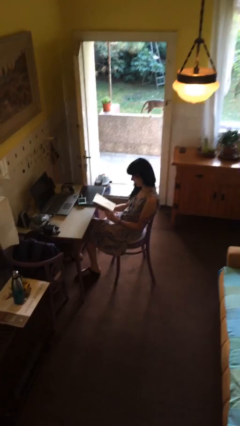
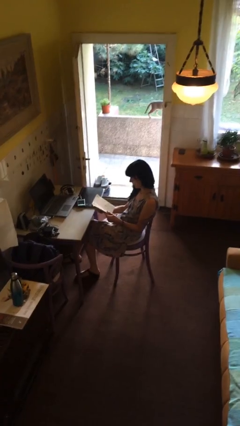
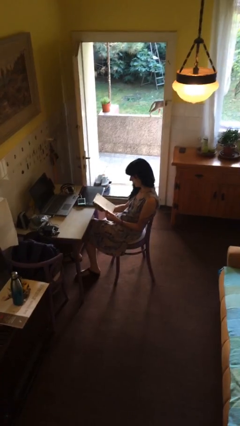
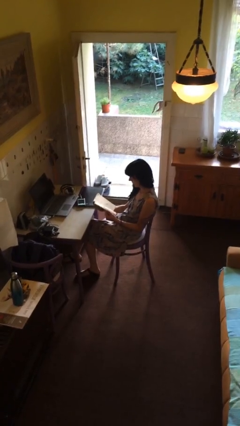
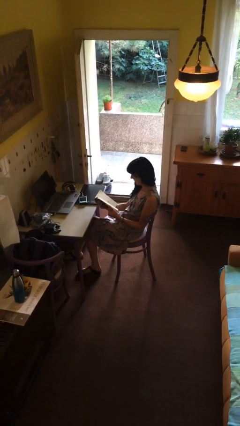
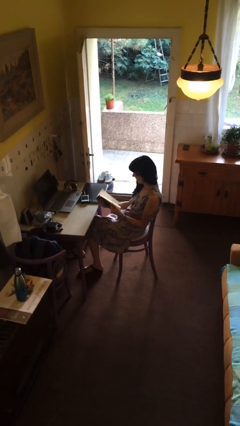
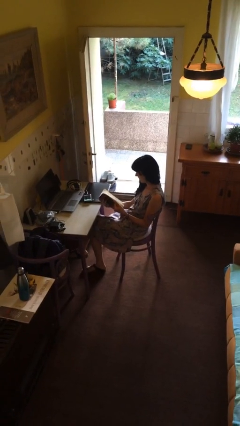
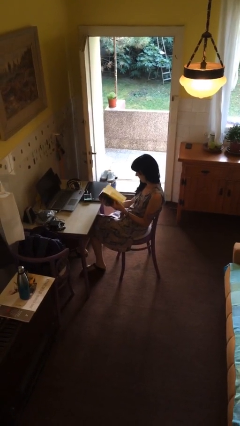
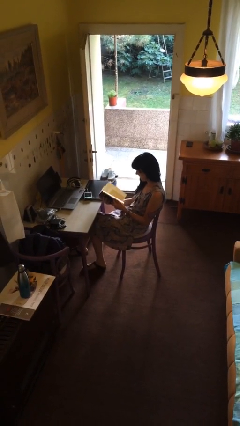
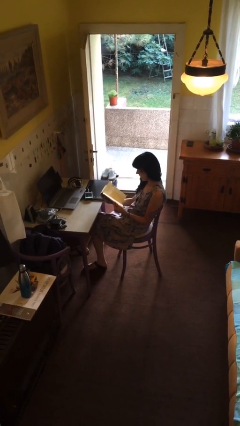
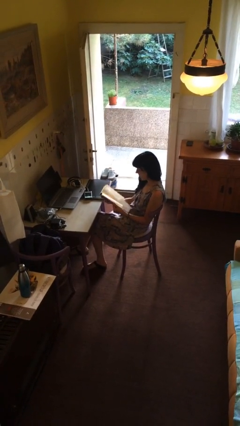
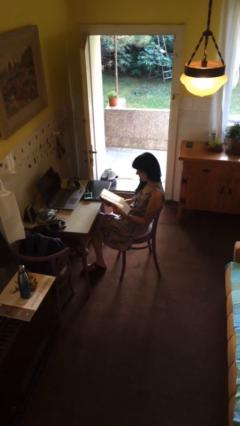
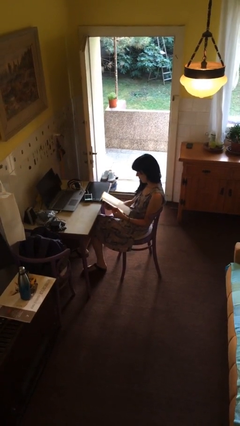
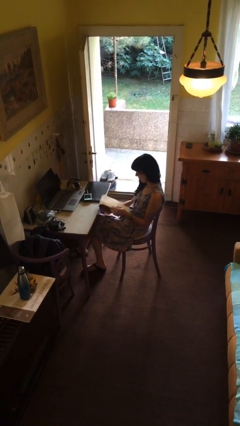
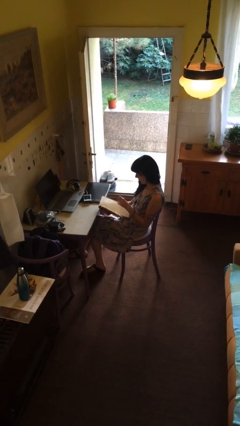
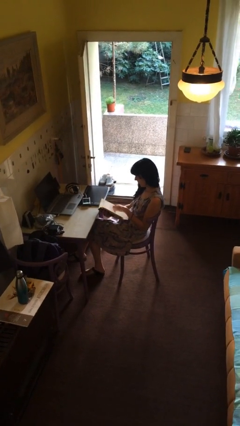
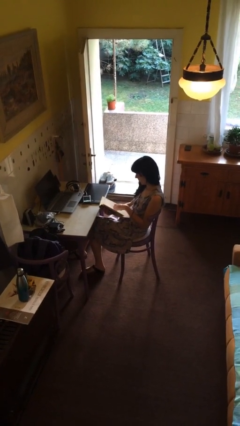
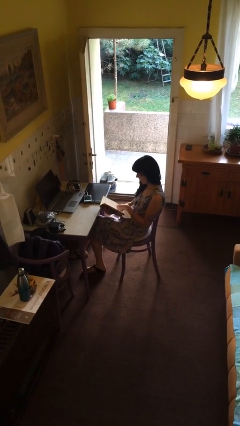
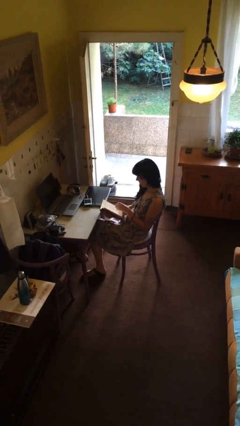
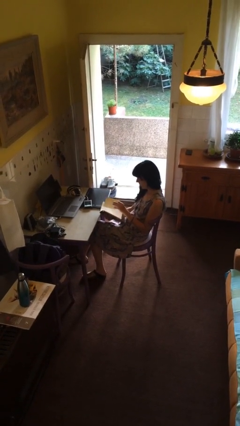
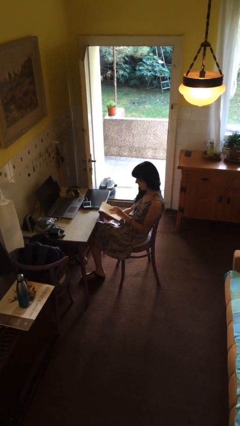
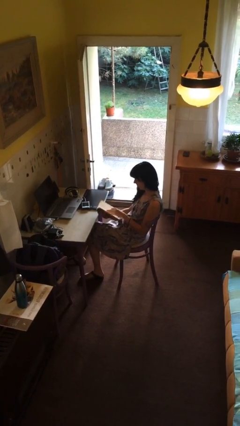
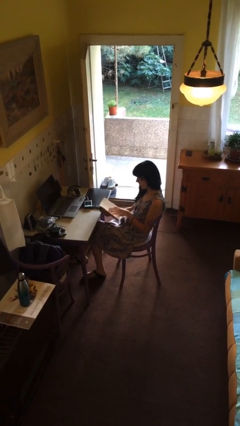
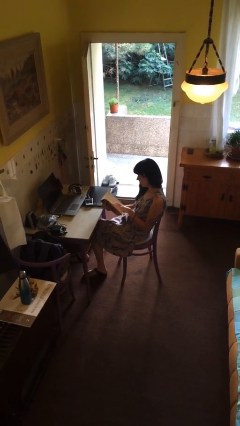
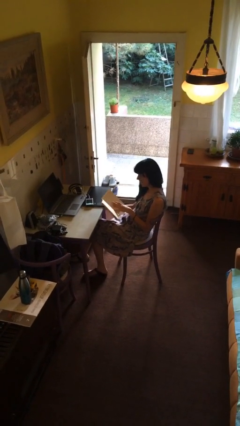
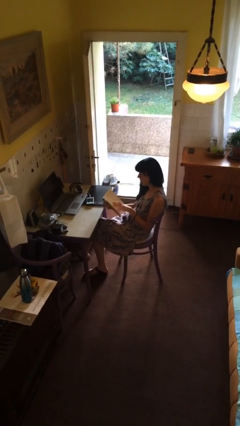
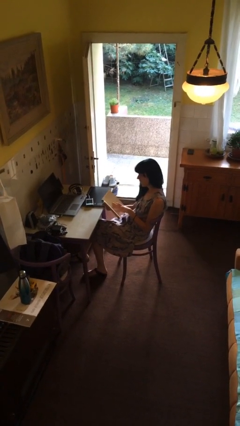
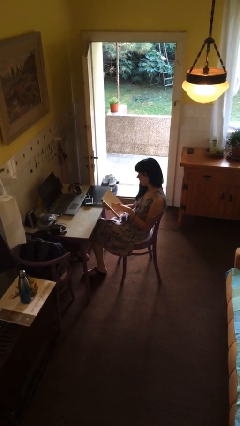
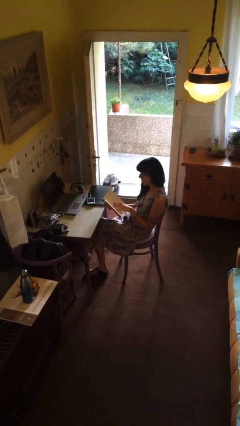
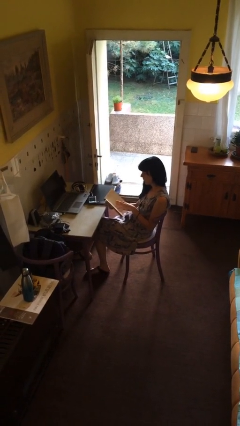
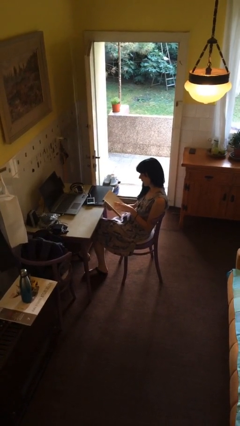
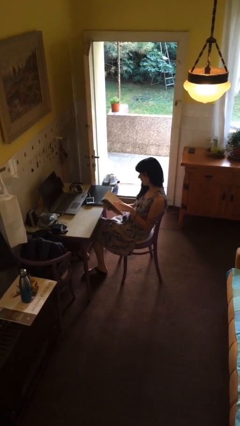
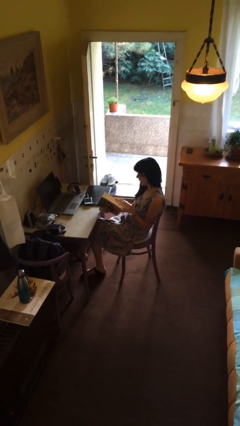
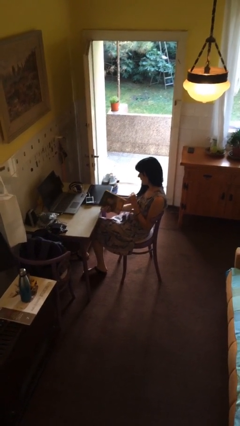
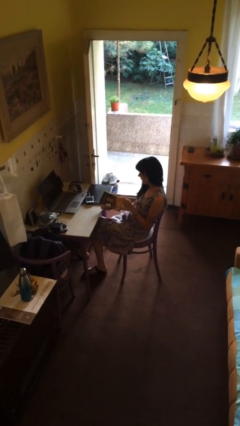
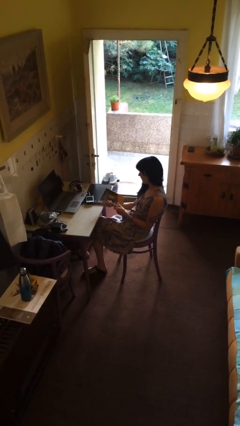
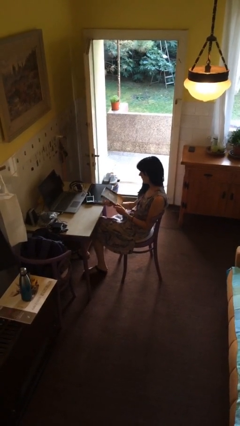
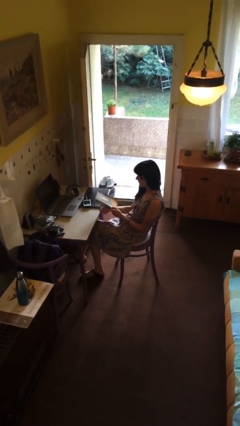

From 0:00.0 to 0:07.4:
person reads document

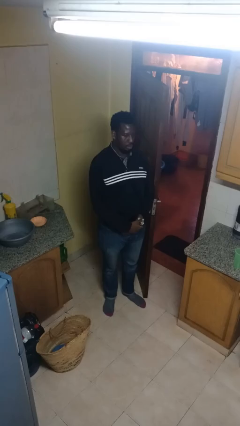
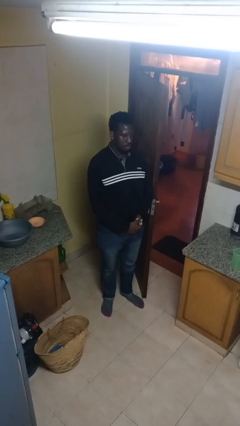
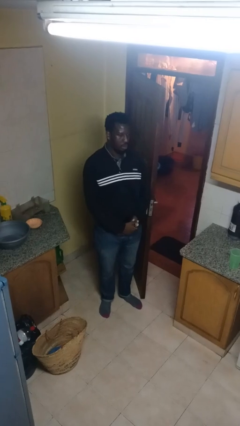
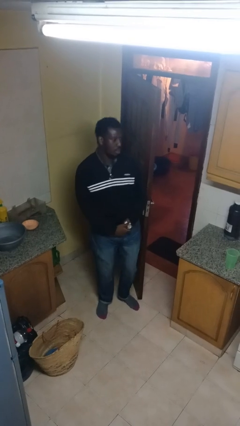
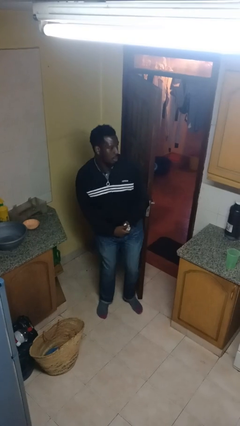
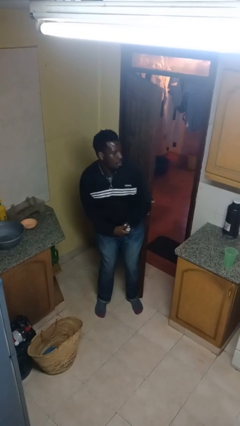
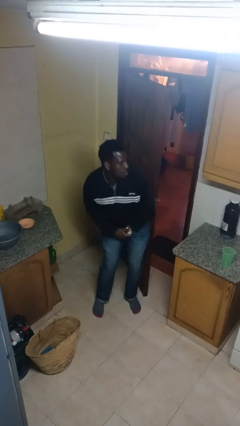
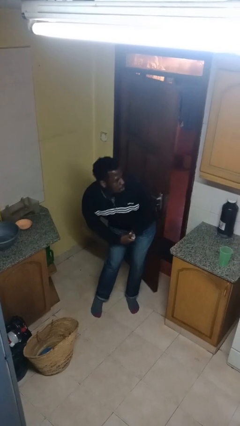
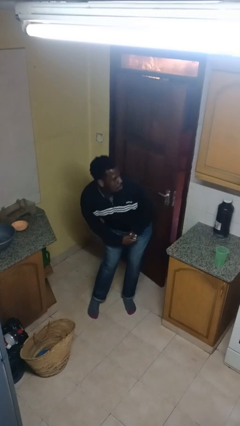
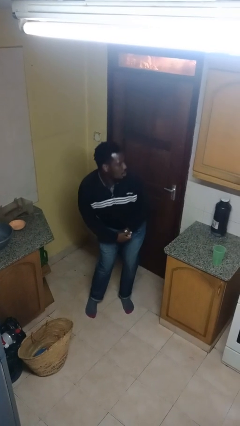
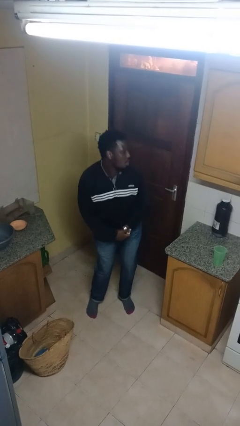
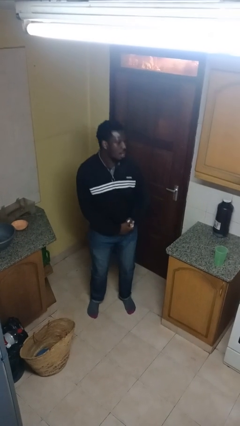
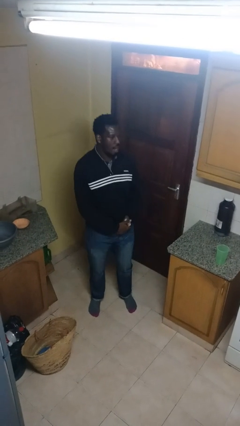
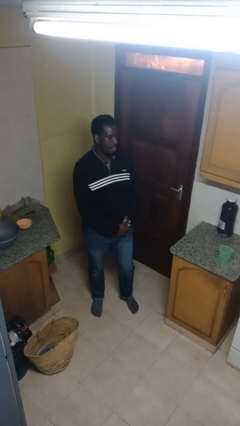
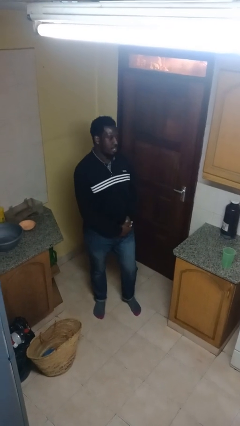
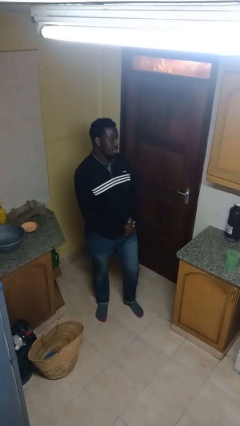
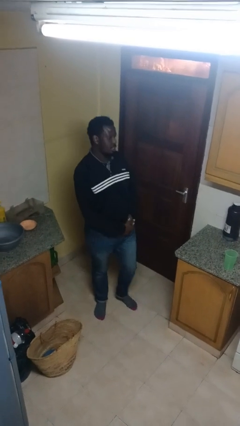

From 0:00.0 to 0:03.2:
person closes door with hip

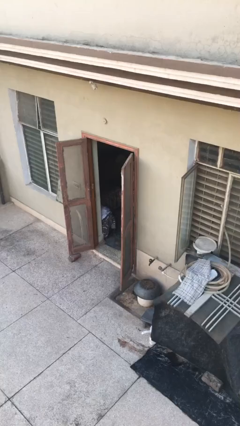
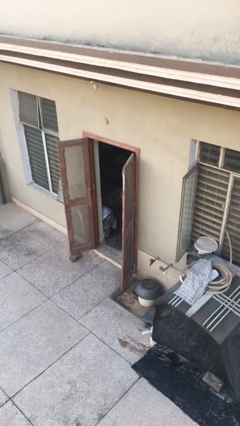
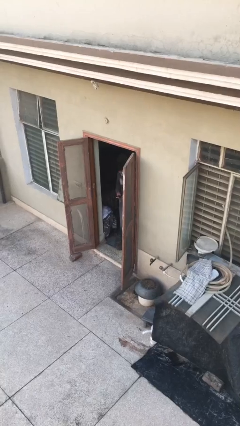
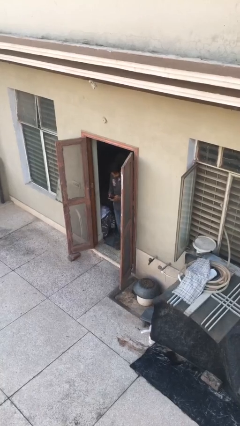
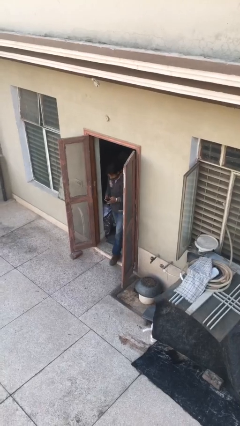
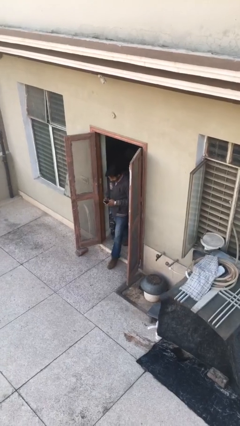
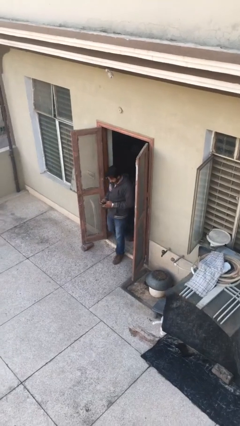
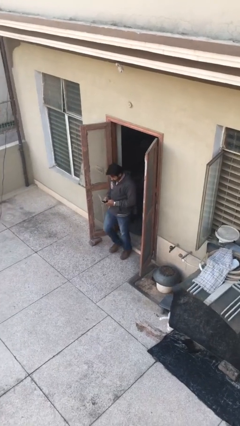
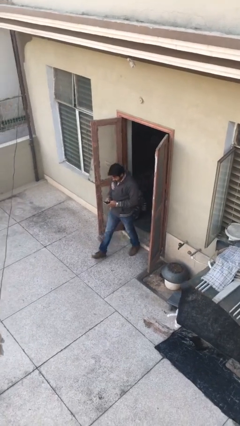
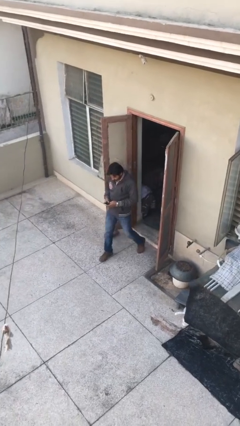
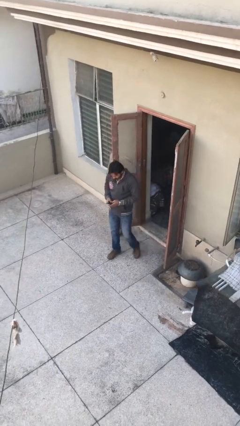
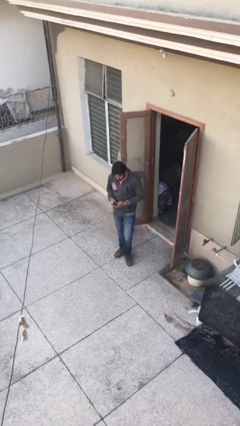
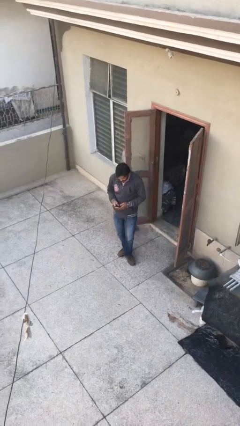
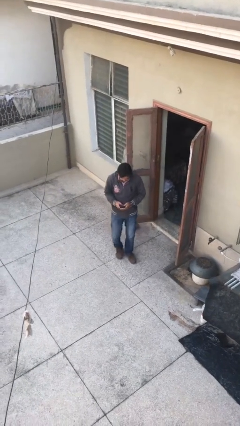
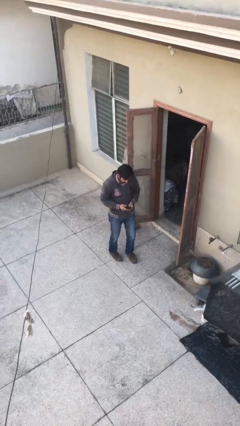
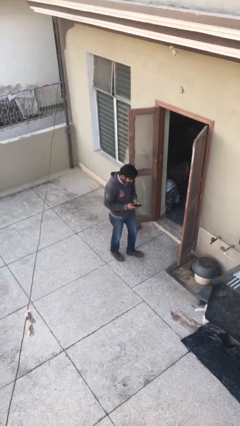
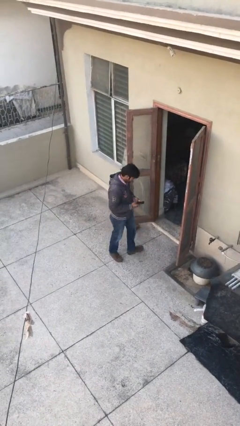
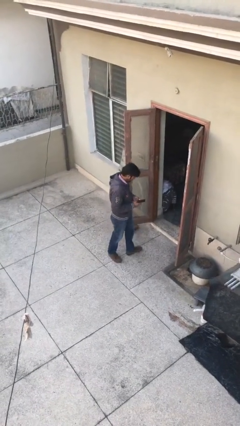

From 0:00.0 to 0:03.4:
person enters scene through structure

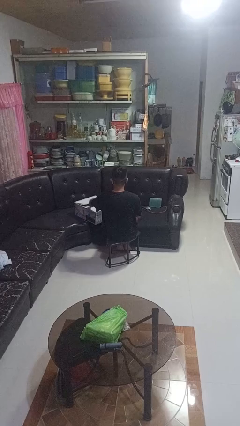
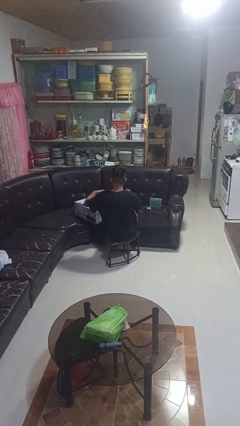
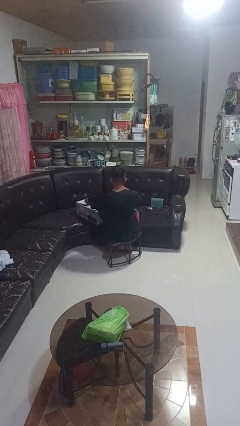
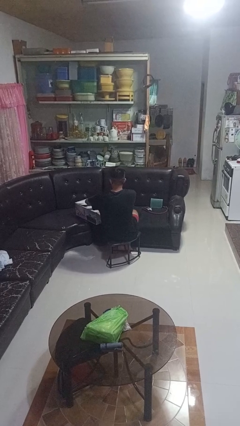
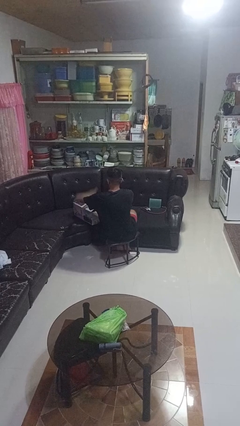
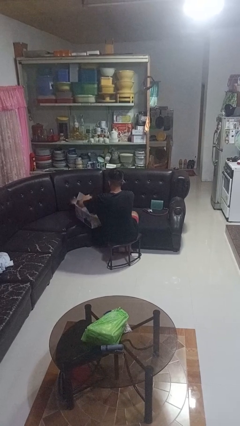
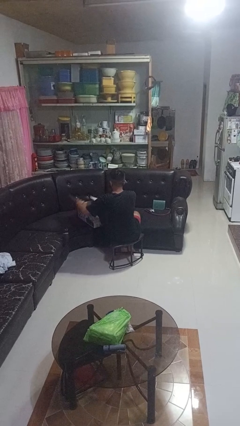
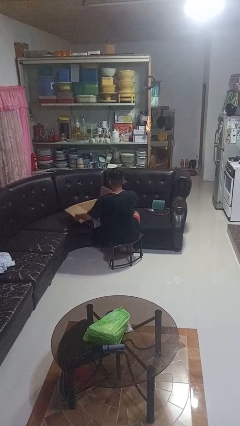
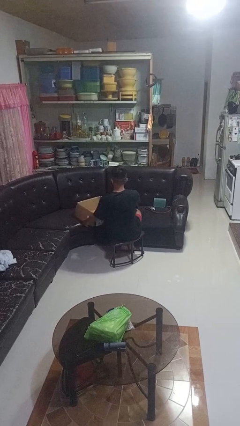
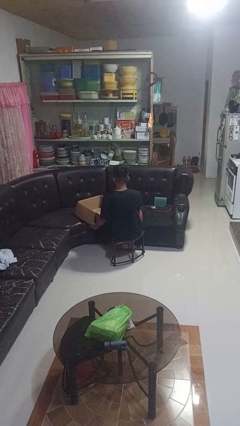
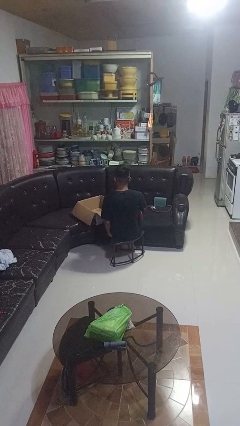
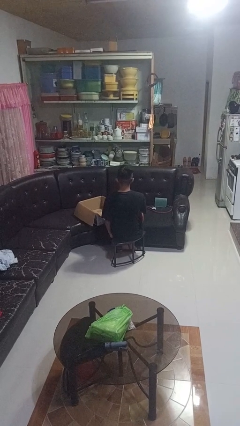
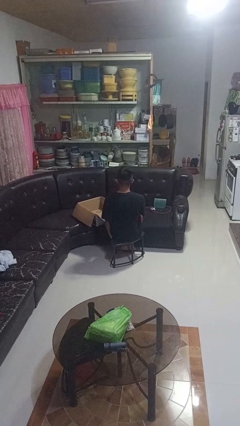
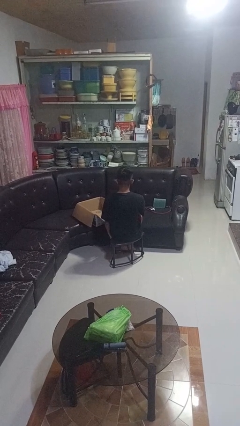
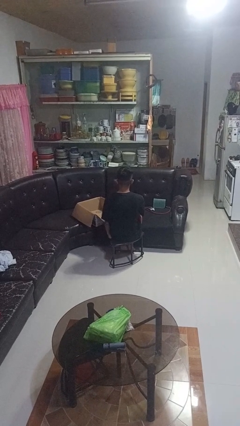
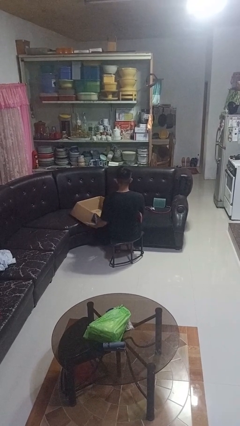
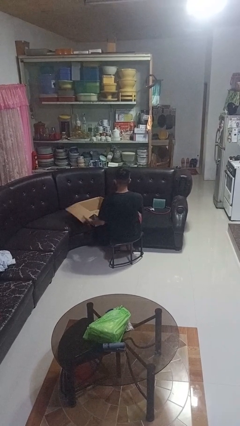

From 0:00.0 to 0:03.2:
person opens box

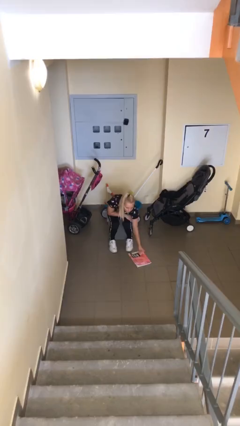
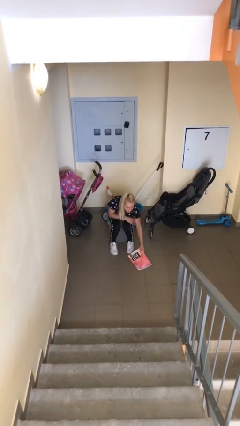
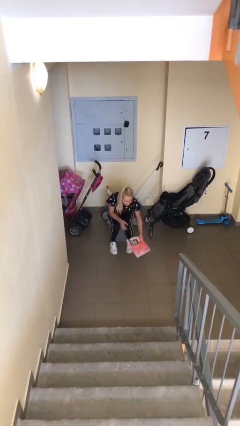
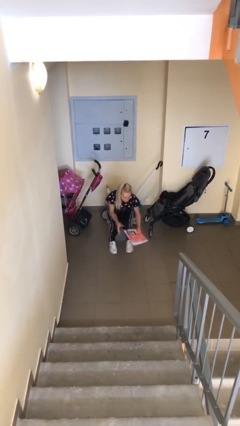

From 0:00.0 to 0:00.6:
person picks up object from floor
